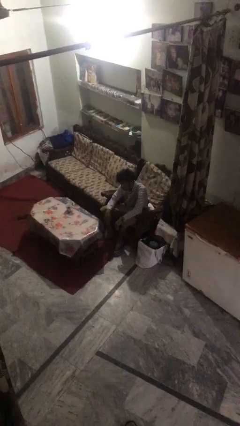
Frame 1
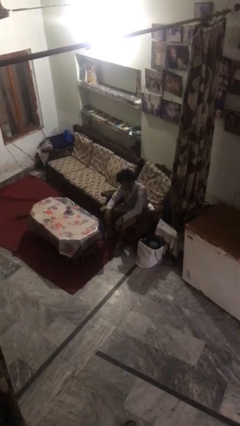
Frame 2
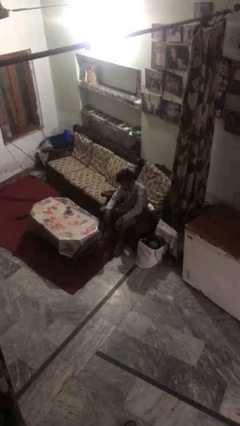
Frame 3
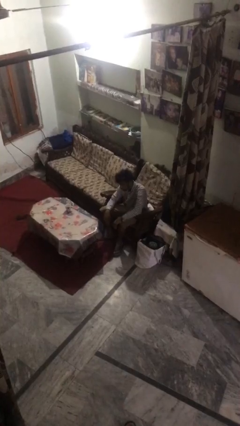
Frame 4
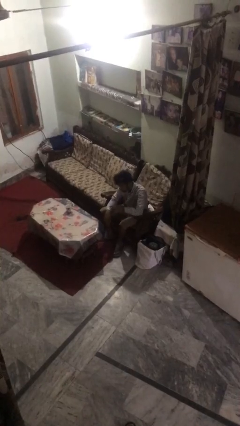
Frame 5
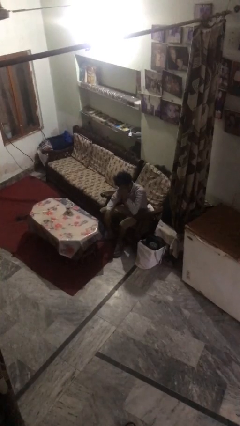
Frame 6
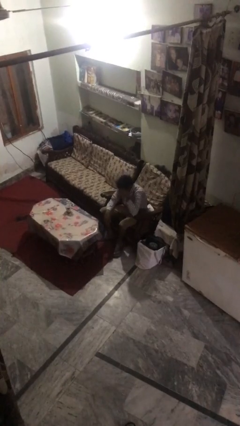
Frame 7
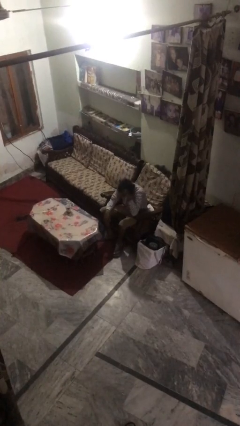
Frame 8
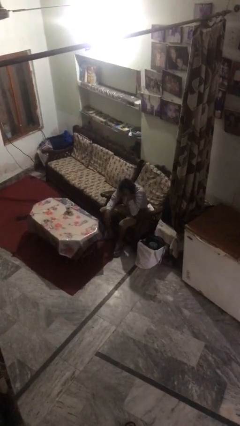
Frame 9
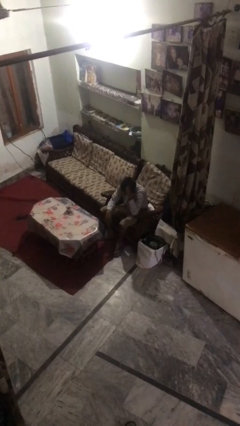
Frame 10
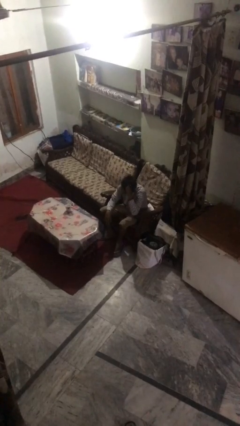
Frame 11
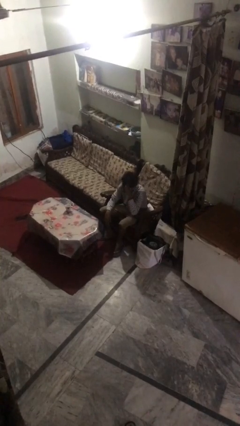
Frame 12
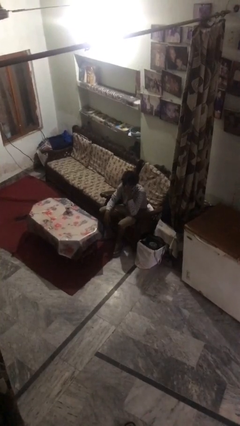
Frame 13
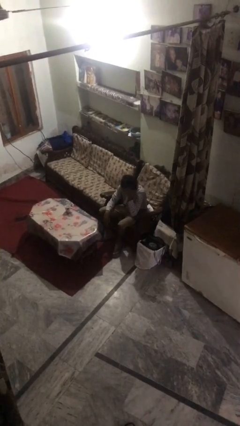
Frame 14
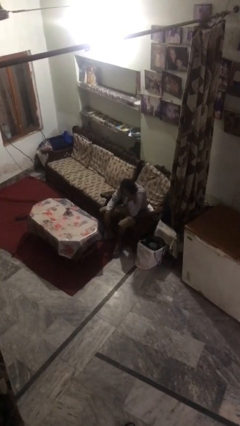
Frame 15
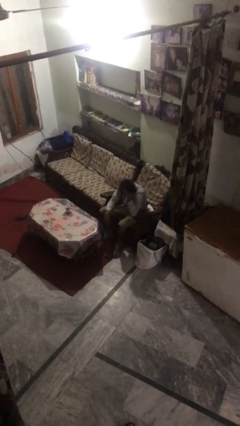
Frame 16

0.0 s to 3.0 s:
person strokes hair

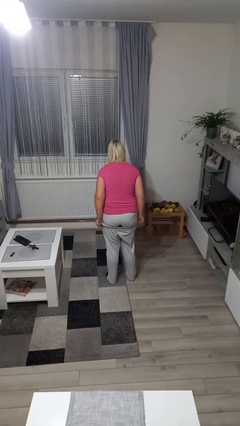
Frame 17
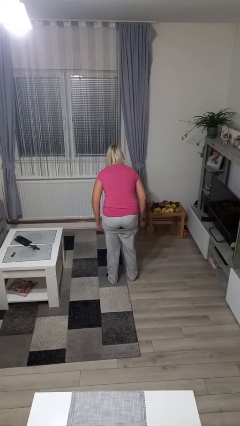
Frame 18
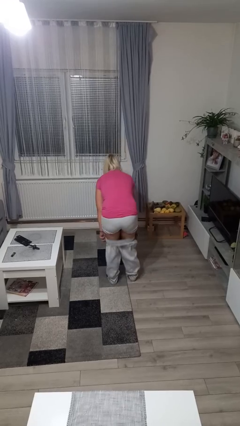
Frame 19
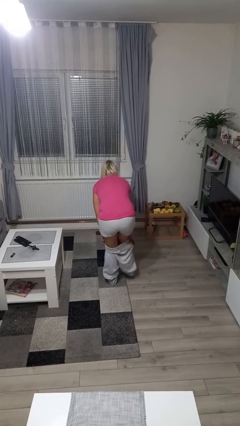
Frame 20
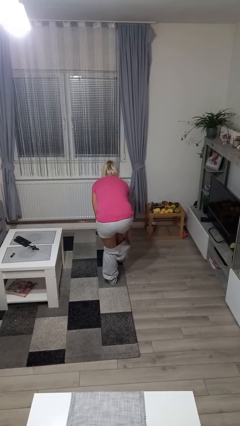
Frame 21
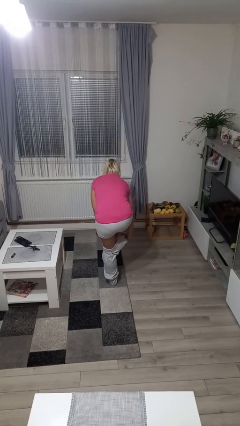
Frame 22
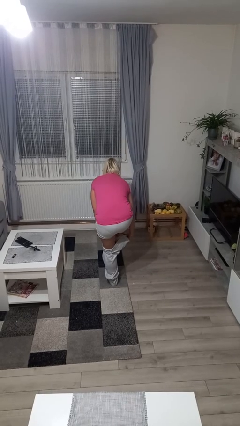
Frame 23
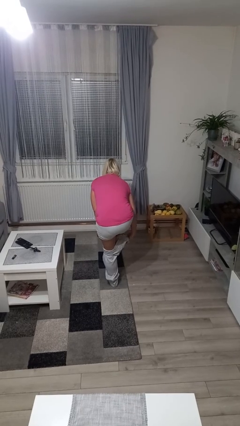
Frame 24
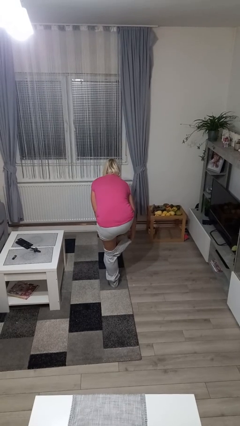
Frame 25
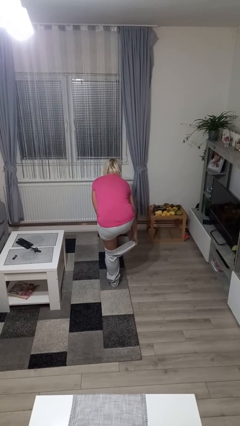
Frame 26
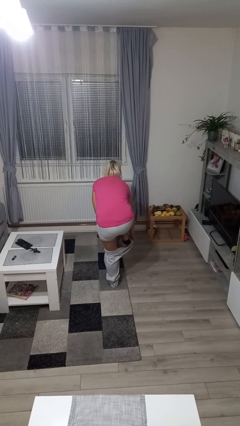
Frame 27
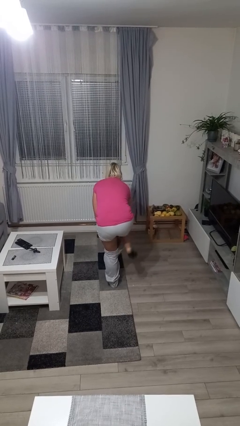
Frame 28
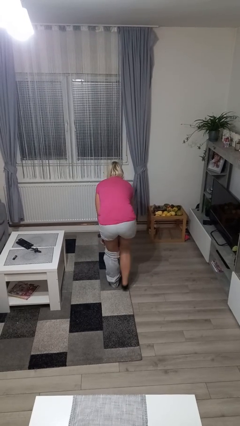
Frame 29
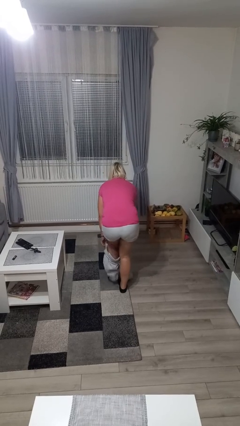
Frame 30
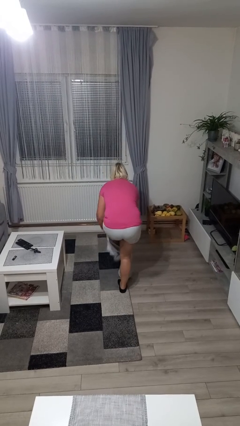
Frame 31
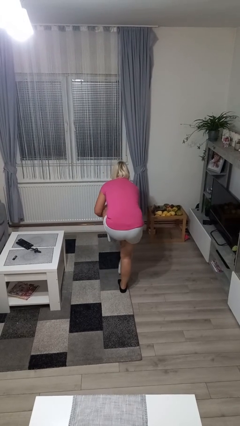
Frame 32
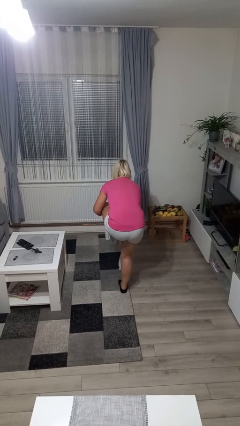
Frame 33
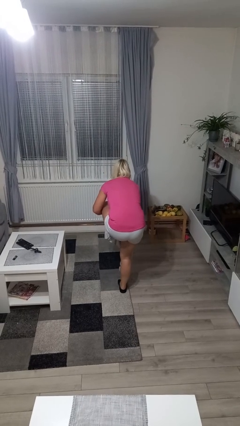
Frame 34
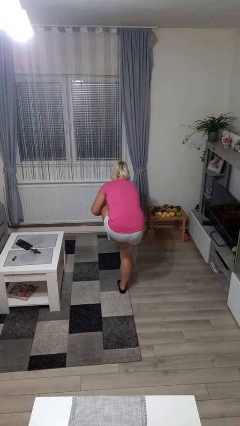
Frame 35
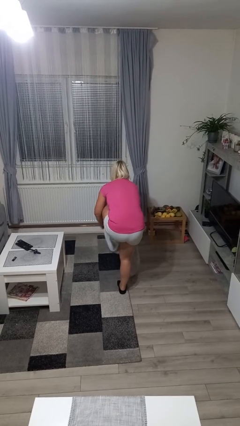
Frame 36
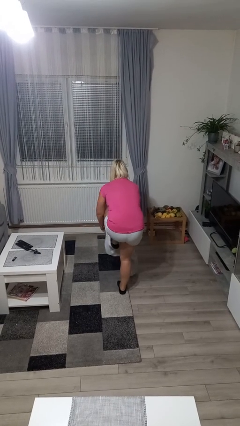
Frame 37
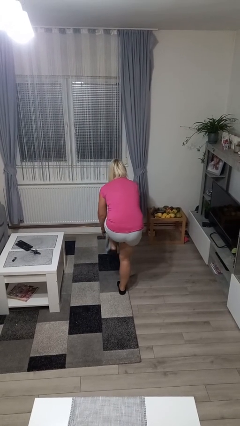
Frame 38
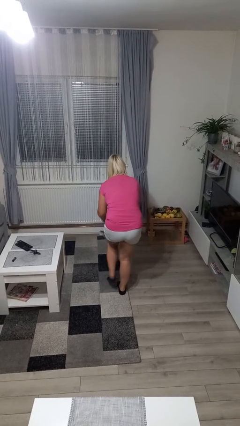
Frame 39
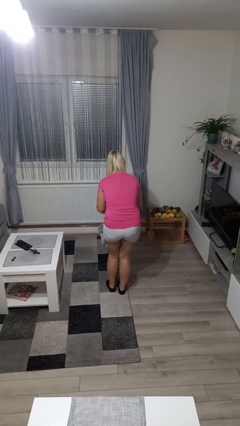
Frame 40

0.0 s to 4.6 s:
person takes off pants

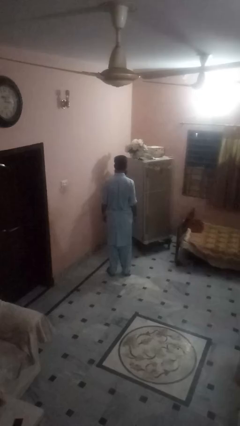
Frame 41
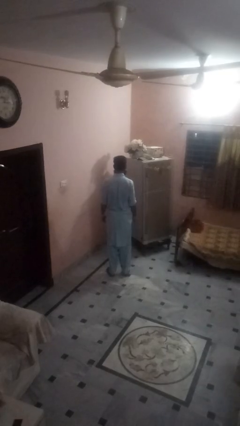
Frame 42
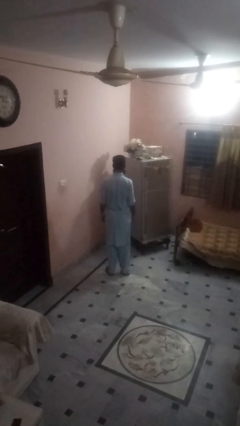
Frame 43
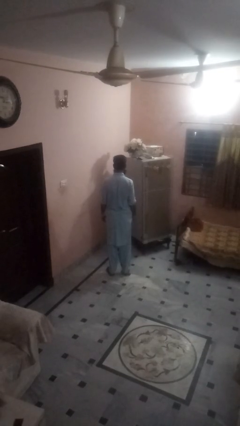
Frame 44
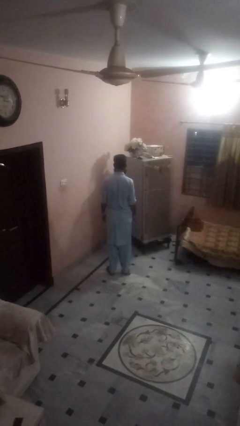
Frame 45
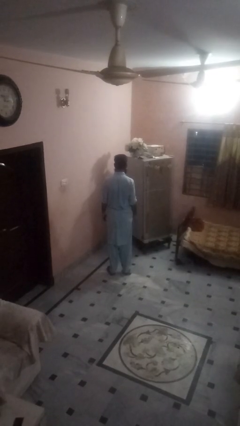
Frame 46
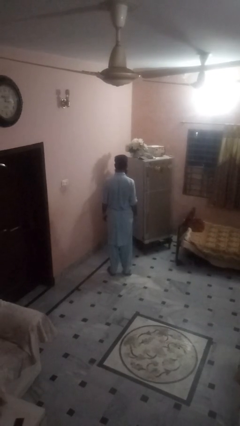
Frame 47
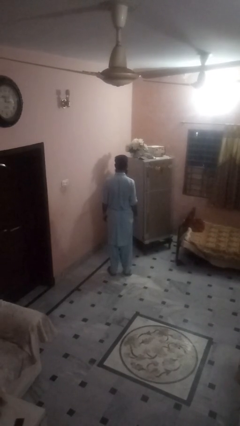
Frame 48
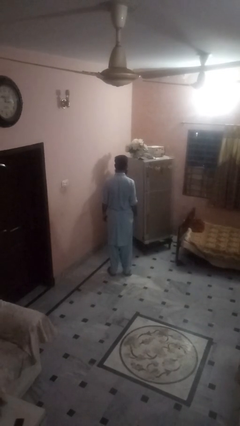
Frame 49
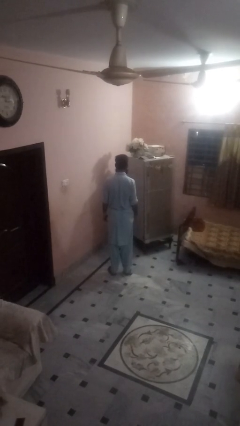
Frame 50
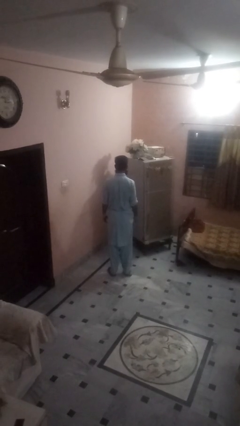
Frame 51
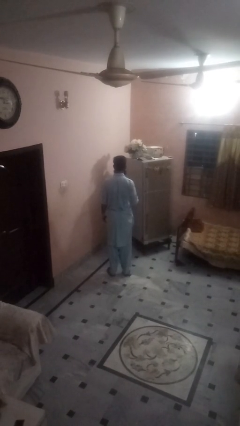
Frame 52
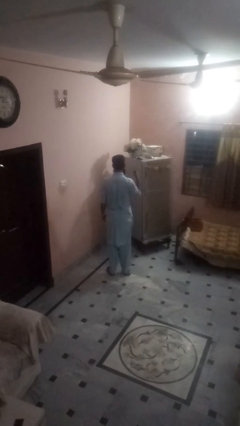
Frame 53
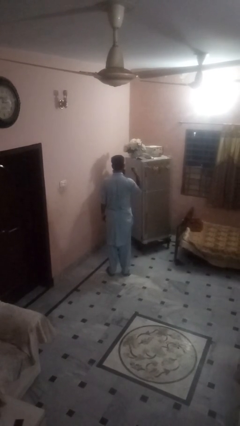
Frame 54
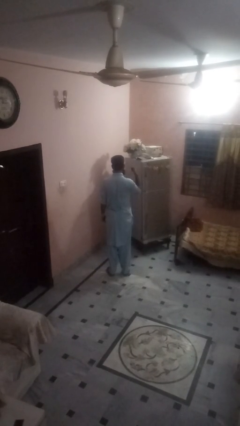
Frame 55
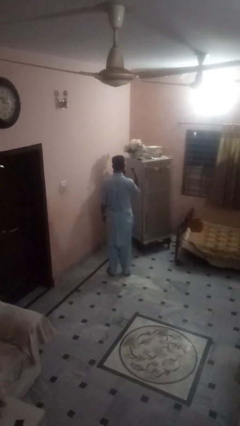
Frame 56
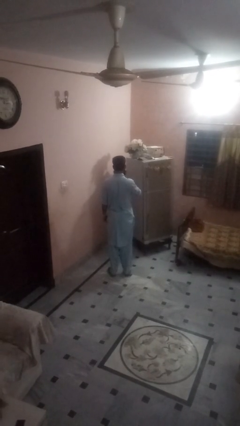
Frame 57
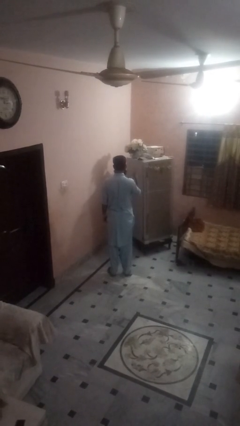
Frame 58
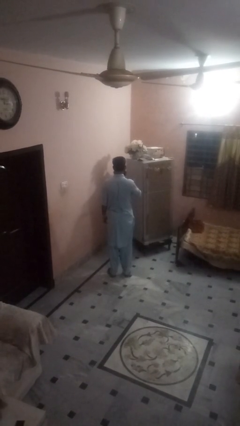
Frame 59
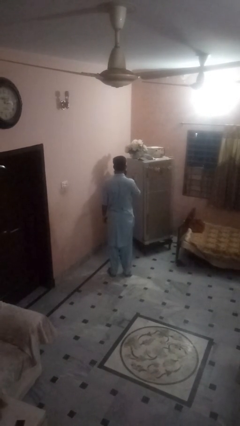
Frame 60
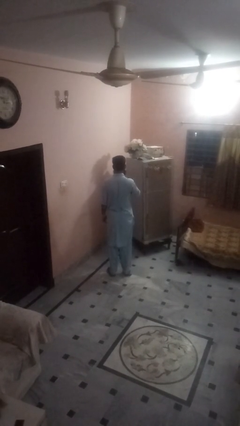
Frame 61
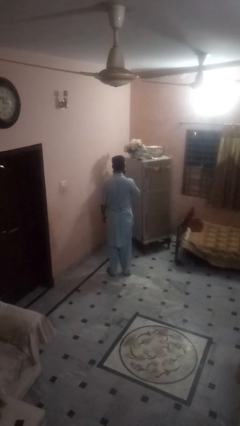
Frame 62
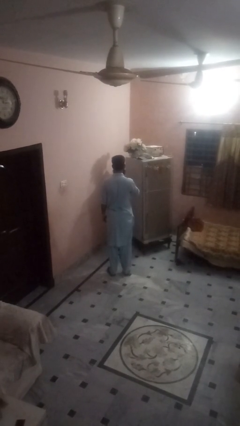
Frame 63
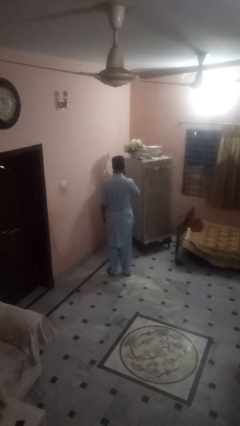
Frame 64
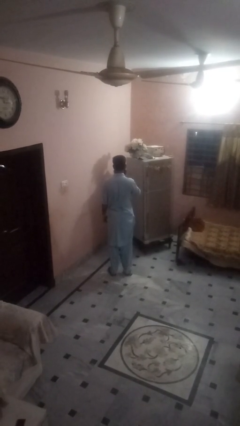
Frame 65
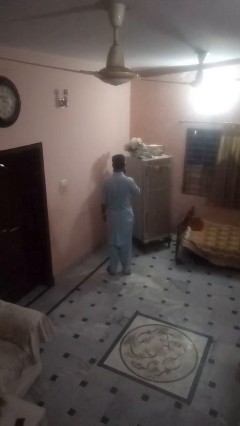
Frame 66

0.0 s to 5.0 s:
person gestures hang loose

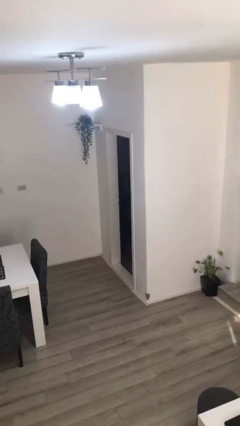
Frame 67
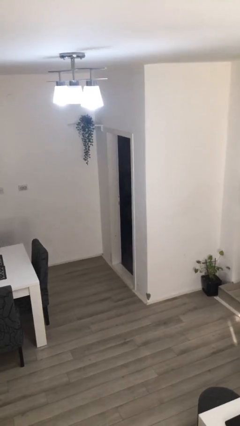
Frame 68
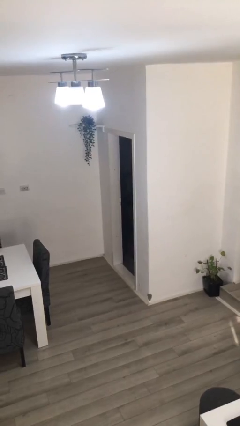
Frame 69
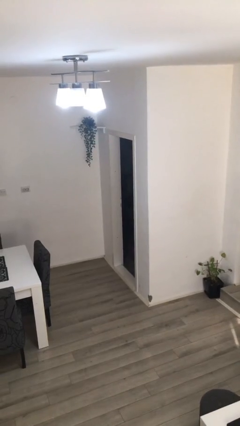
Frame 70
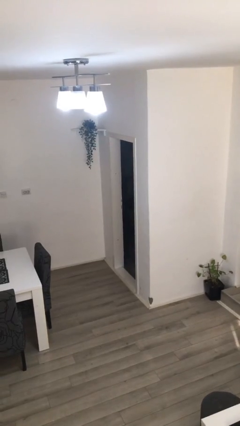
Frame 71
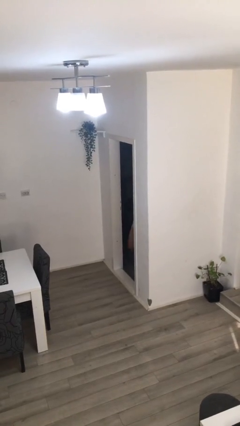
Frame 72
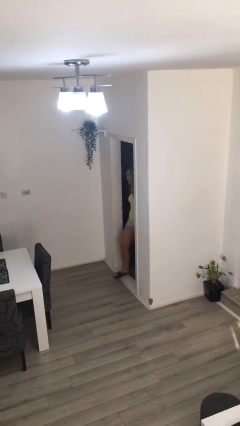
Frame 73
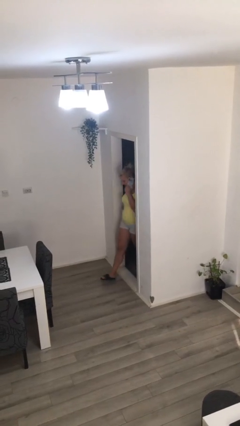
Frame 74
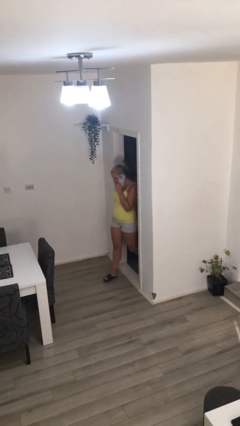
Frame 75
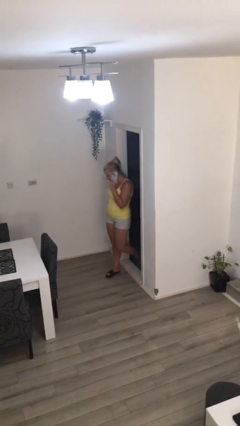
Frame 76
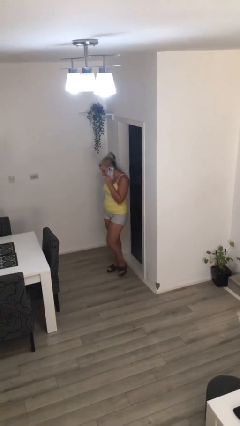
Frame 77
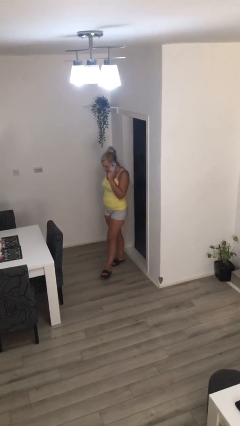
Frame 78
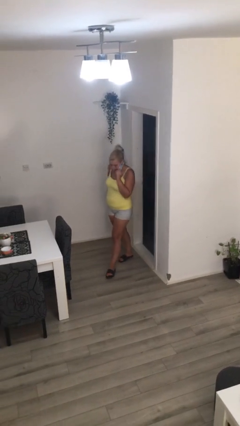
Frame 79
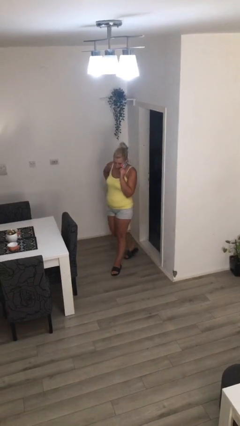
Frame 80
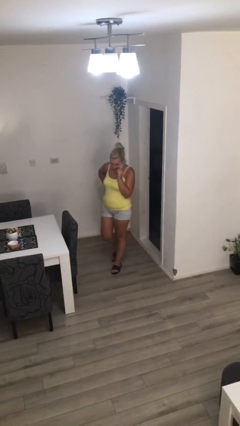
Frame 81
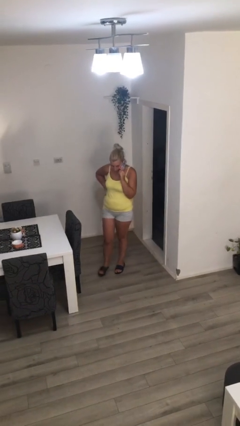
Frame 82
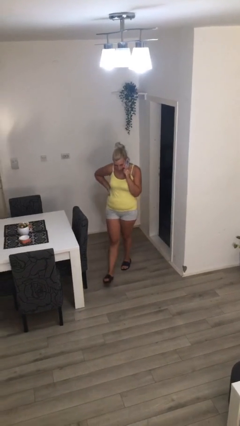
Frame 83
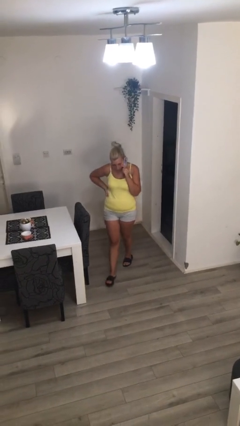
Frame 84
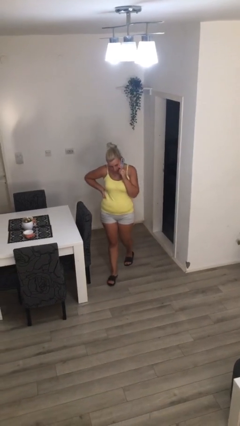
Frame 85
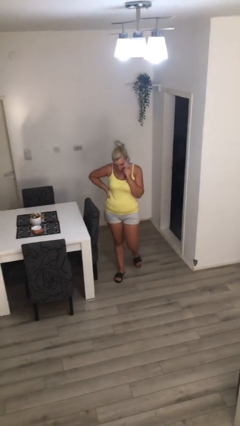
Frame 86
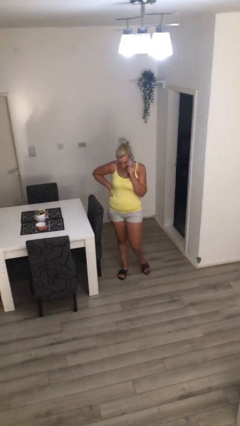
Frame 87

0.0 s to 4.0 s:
person enters scene through structure

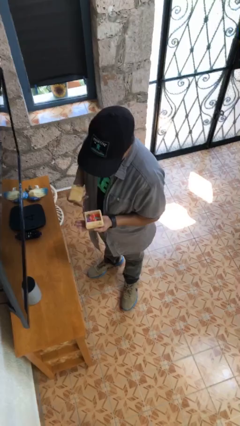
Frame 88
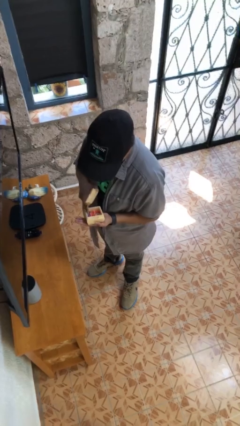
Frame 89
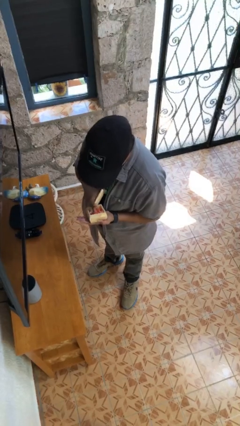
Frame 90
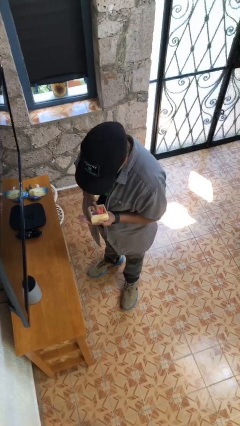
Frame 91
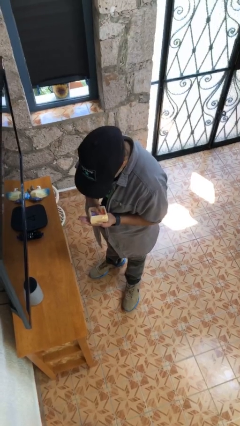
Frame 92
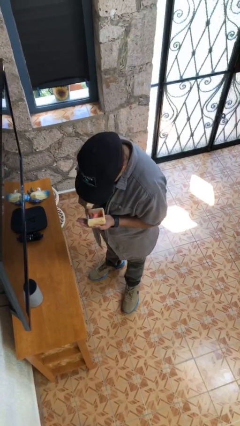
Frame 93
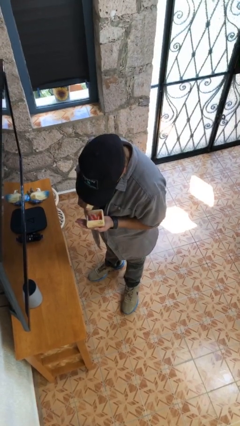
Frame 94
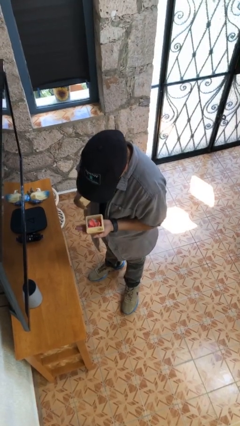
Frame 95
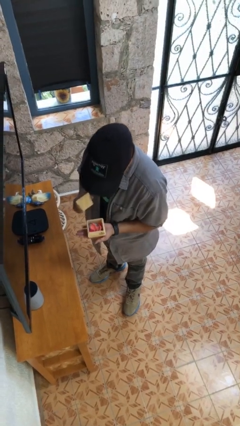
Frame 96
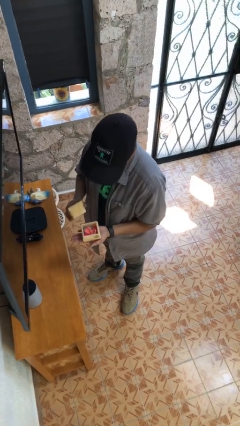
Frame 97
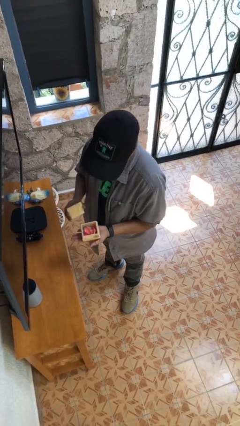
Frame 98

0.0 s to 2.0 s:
person searches jewelry box
